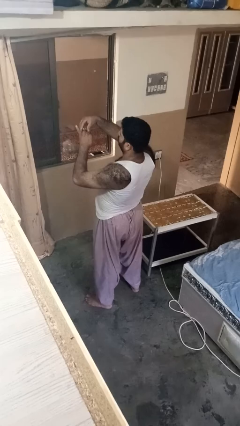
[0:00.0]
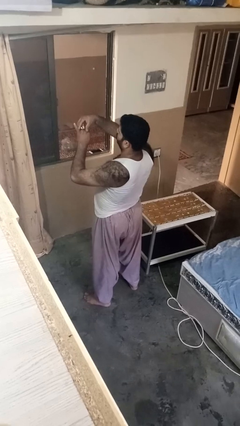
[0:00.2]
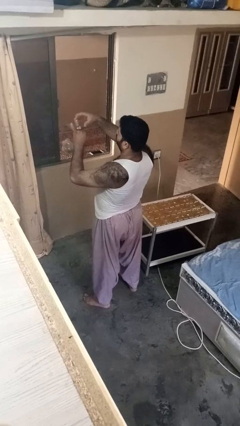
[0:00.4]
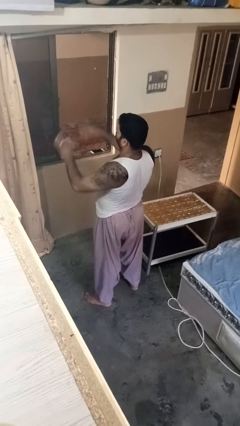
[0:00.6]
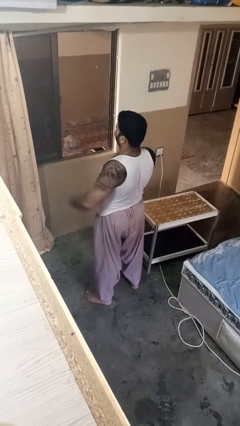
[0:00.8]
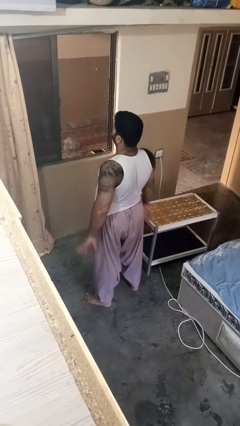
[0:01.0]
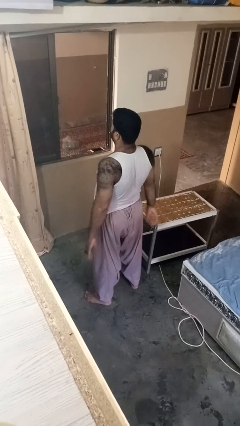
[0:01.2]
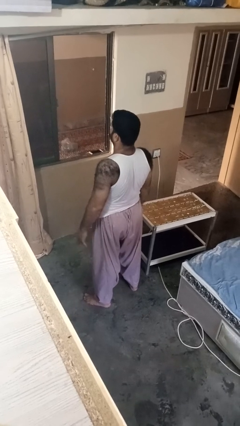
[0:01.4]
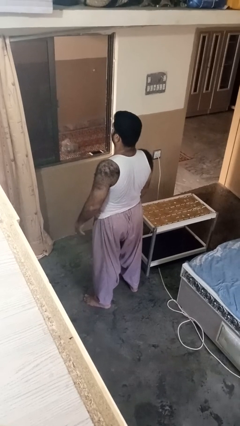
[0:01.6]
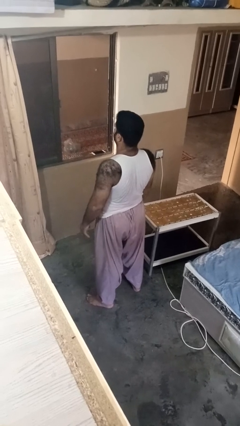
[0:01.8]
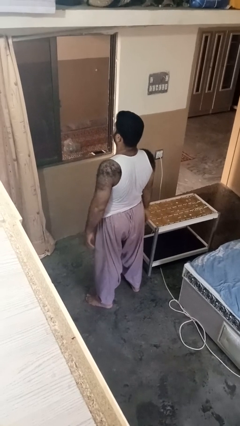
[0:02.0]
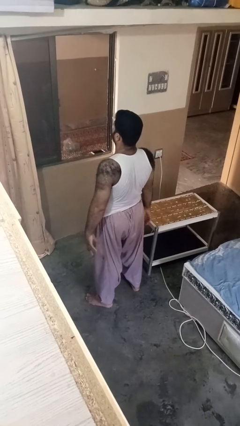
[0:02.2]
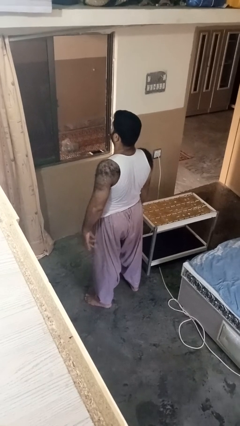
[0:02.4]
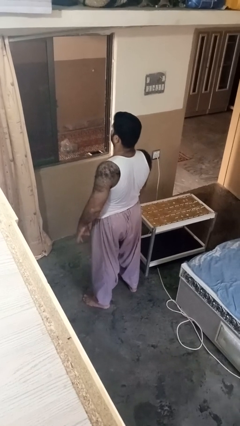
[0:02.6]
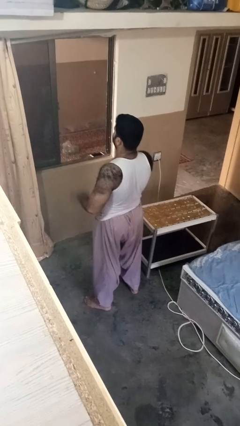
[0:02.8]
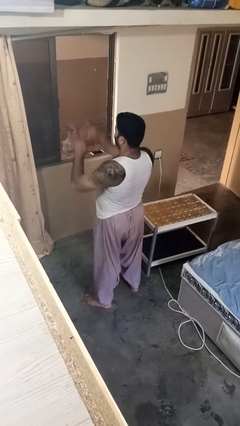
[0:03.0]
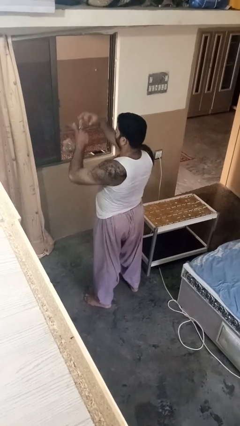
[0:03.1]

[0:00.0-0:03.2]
person puts on ring

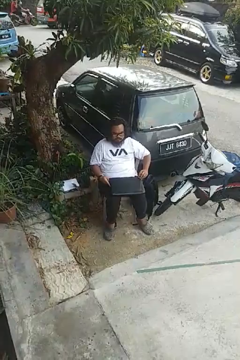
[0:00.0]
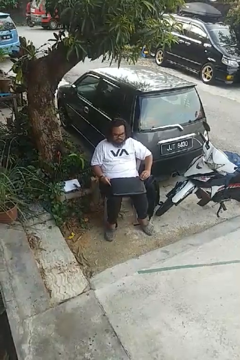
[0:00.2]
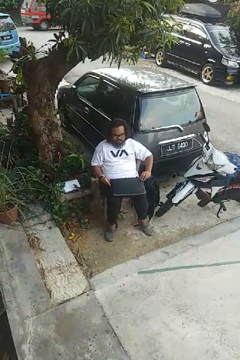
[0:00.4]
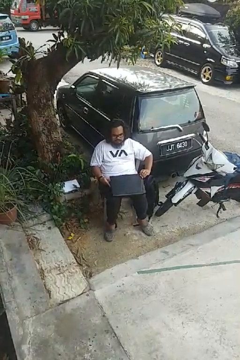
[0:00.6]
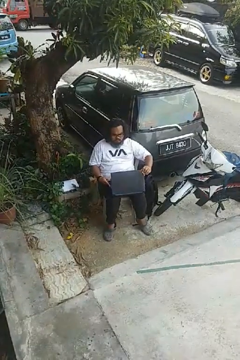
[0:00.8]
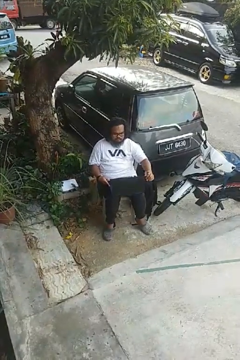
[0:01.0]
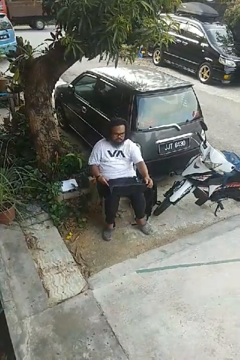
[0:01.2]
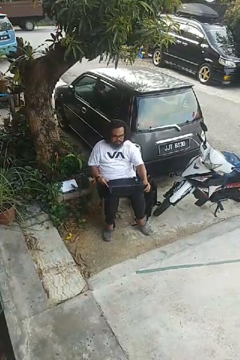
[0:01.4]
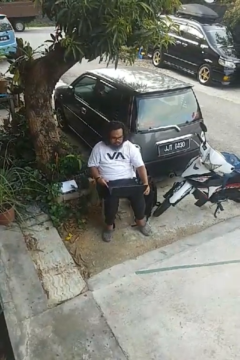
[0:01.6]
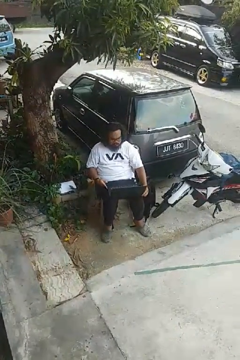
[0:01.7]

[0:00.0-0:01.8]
person opens laptop

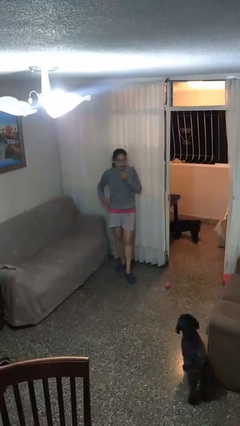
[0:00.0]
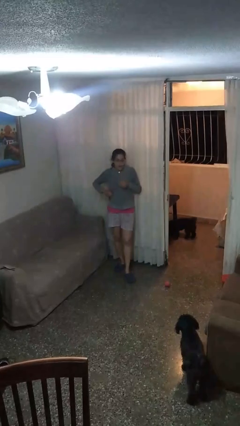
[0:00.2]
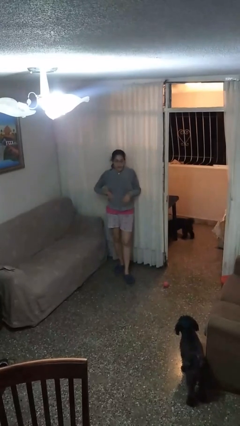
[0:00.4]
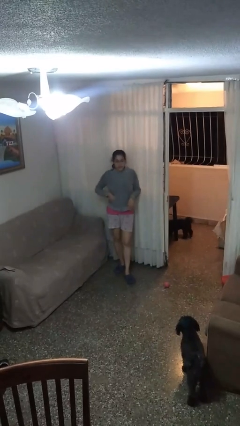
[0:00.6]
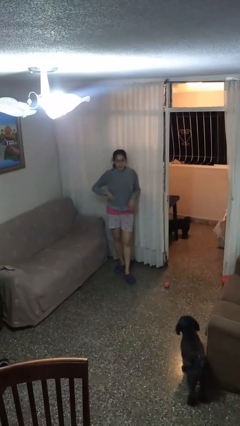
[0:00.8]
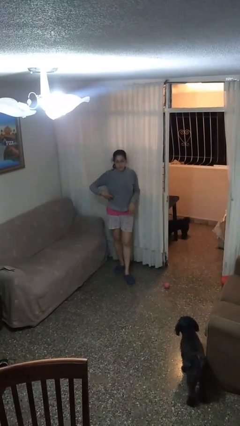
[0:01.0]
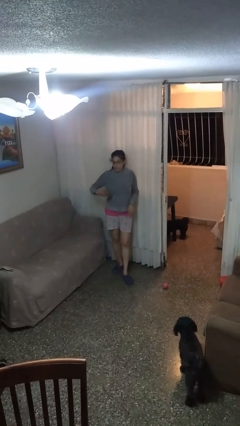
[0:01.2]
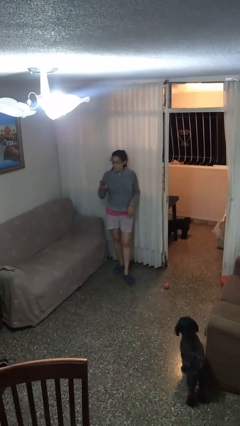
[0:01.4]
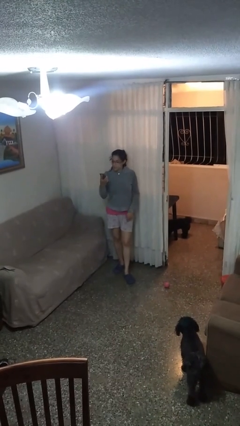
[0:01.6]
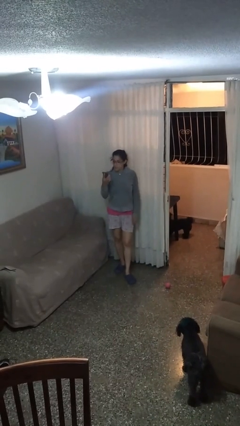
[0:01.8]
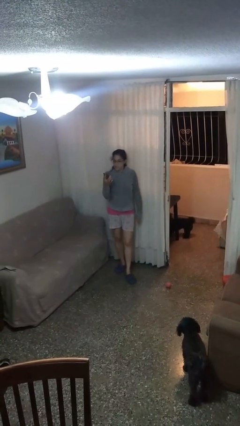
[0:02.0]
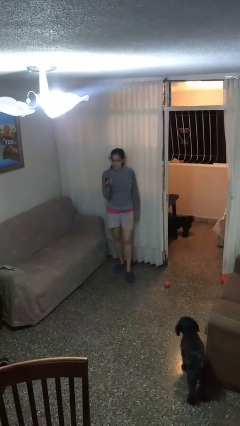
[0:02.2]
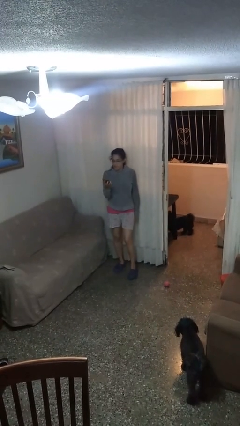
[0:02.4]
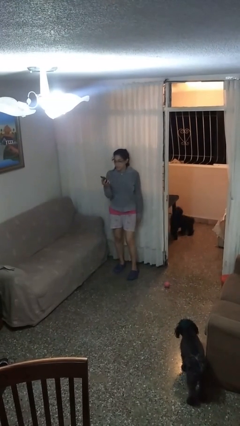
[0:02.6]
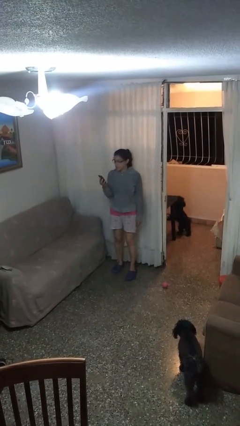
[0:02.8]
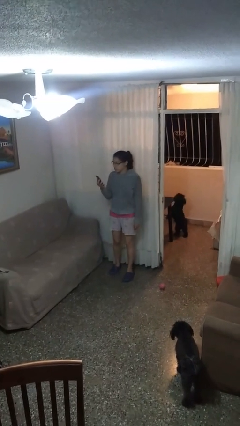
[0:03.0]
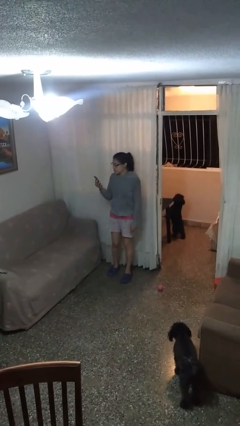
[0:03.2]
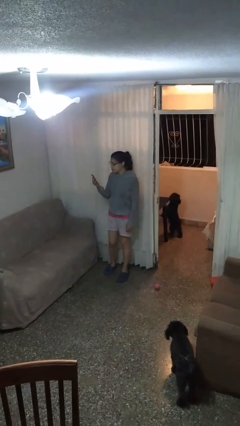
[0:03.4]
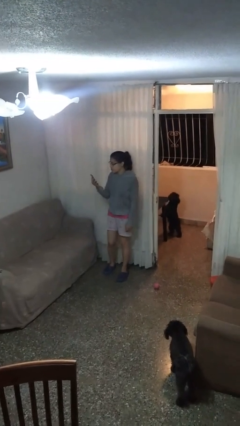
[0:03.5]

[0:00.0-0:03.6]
person takes phone from pocket

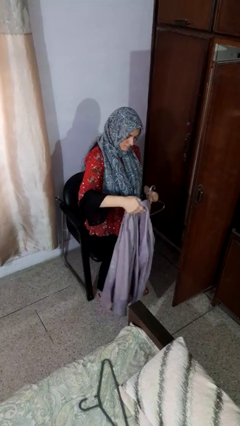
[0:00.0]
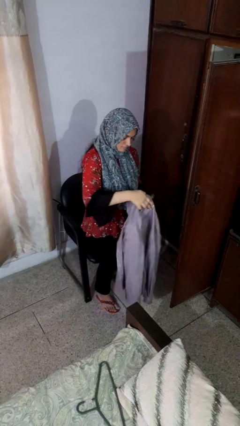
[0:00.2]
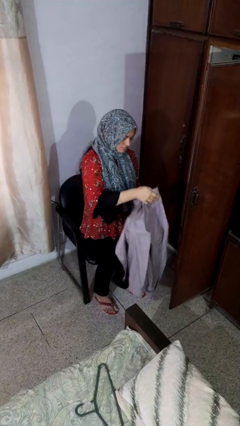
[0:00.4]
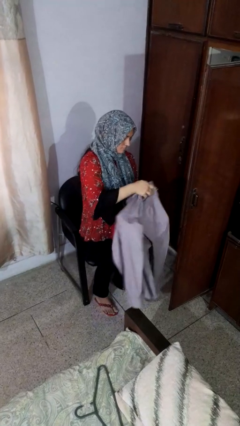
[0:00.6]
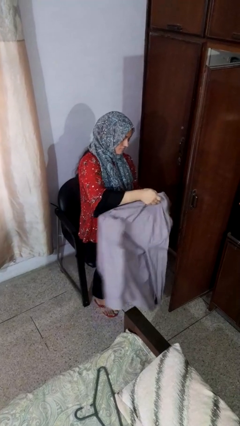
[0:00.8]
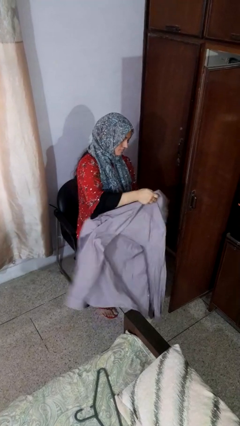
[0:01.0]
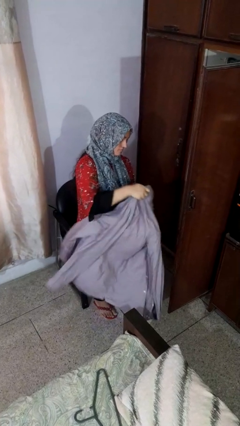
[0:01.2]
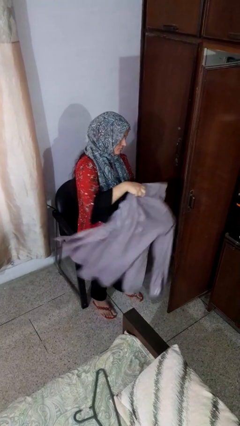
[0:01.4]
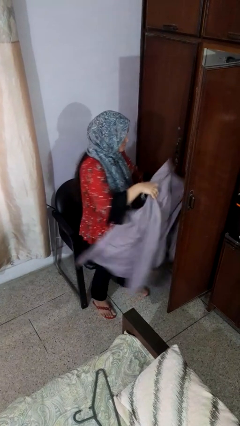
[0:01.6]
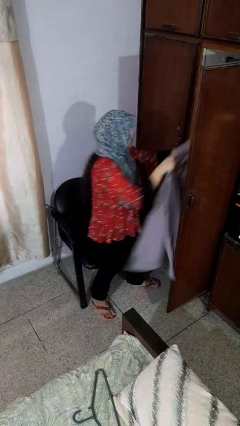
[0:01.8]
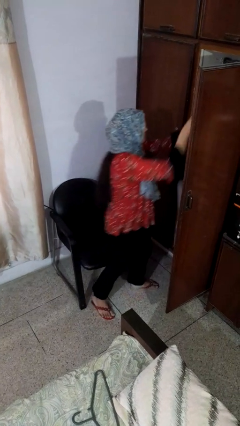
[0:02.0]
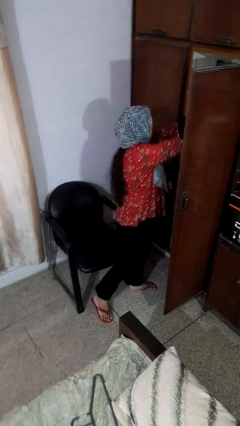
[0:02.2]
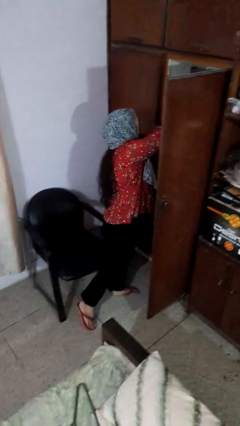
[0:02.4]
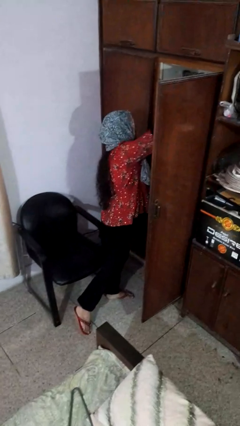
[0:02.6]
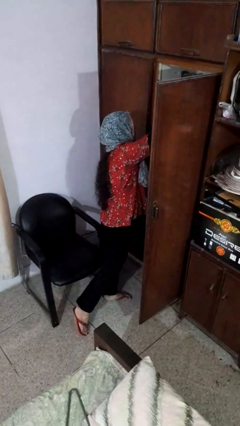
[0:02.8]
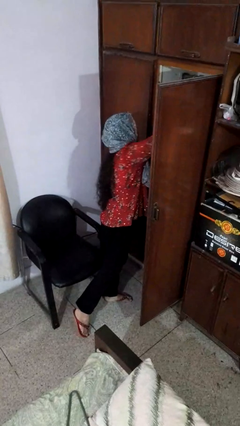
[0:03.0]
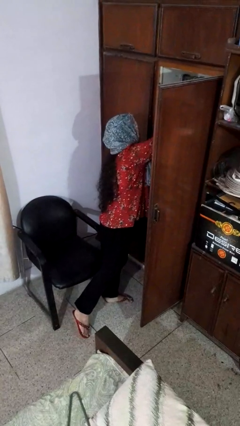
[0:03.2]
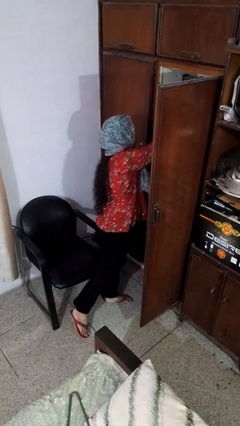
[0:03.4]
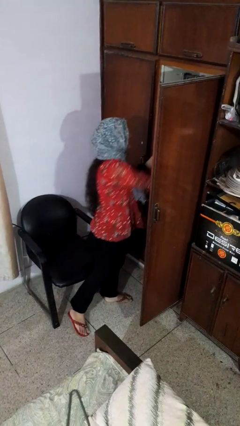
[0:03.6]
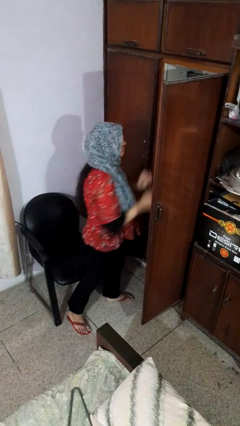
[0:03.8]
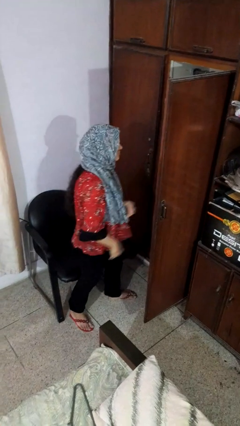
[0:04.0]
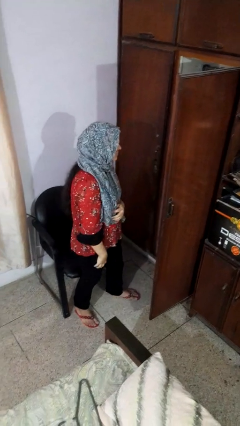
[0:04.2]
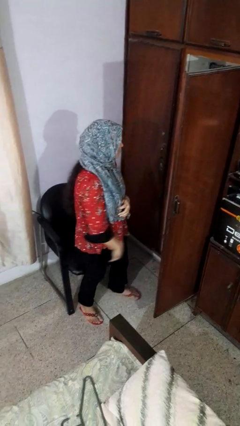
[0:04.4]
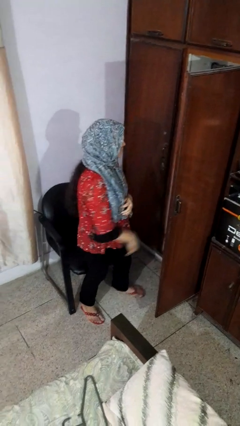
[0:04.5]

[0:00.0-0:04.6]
person puts clothes into closet

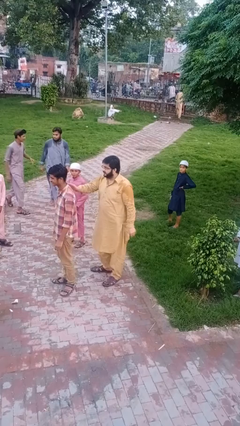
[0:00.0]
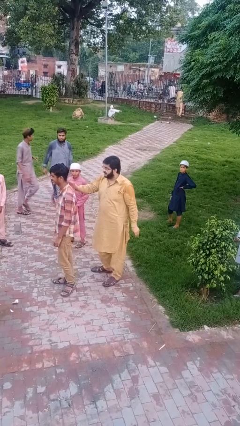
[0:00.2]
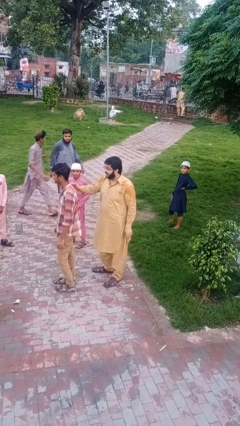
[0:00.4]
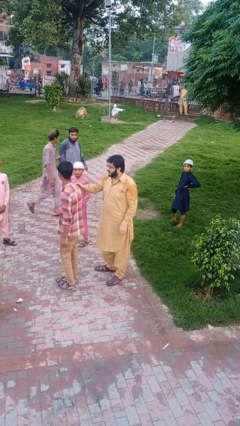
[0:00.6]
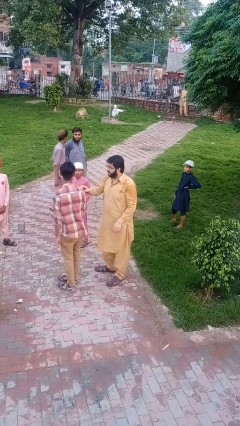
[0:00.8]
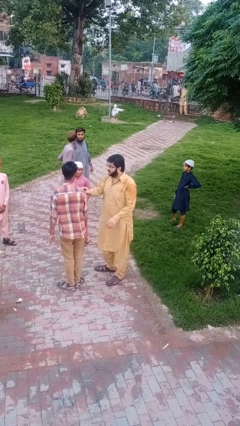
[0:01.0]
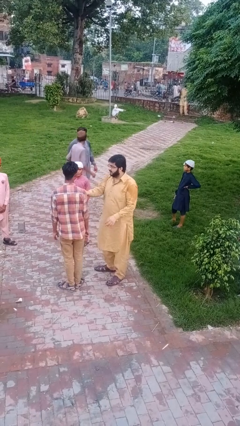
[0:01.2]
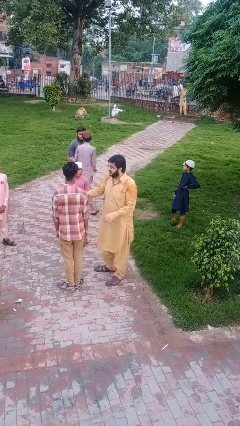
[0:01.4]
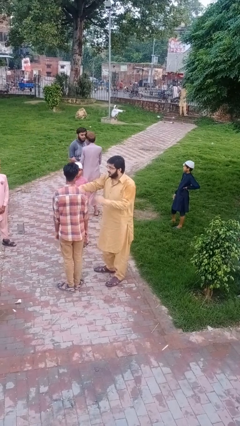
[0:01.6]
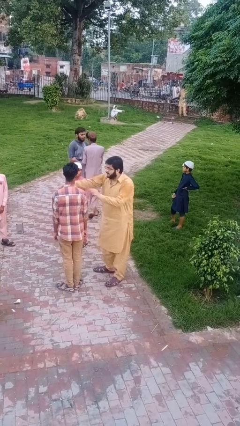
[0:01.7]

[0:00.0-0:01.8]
person grabs person by shoulder

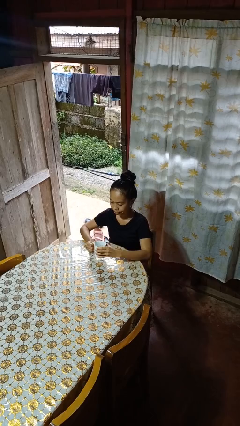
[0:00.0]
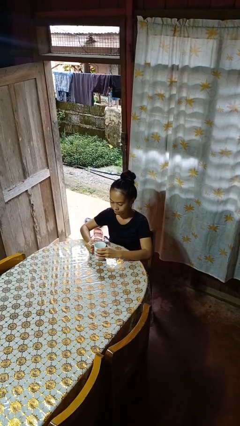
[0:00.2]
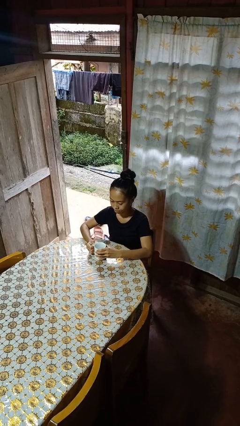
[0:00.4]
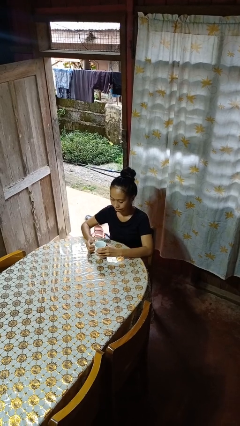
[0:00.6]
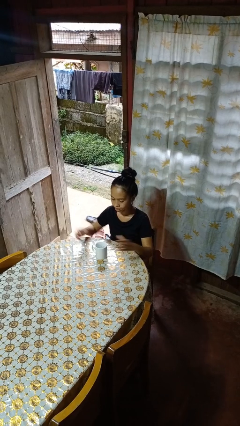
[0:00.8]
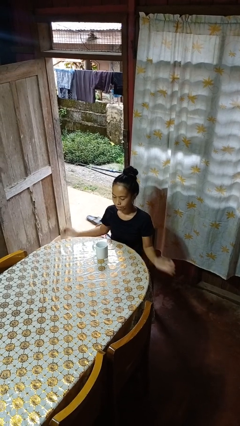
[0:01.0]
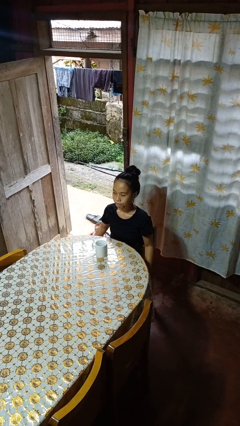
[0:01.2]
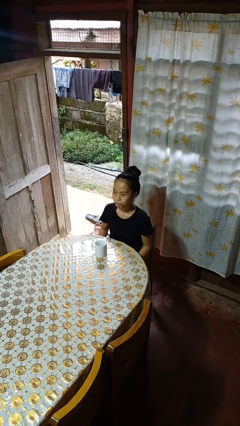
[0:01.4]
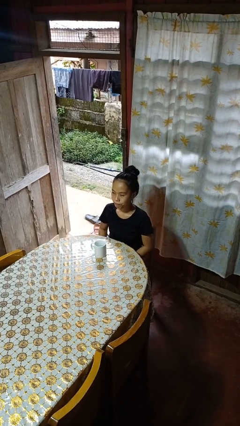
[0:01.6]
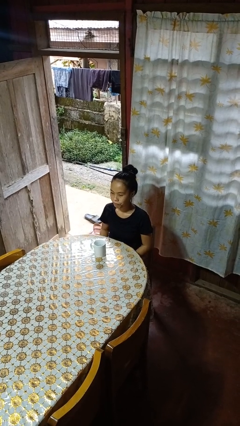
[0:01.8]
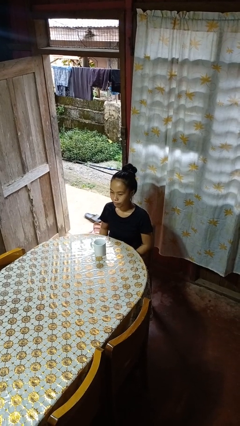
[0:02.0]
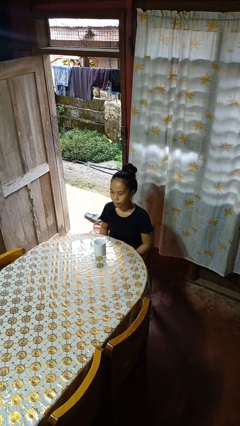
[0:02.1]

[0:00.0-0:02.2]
person puts down object on table
